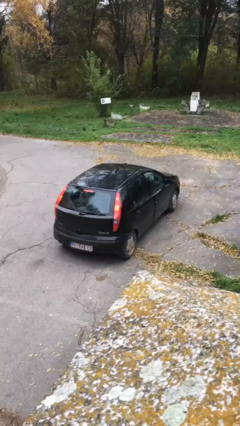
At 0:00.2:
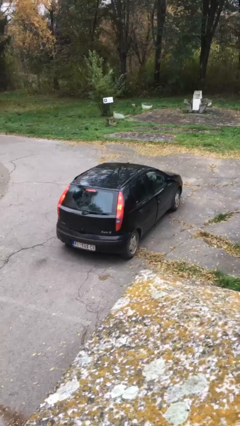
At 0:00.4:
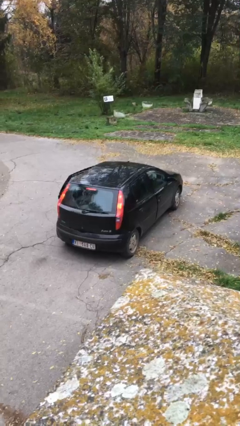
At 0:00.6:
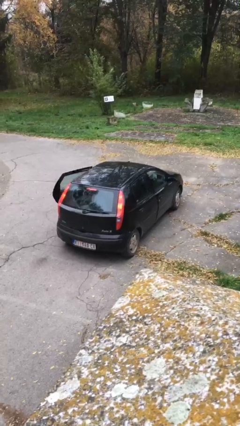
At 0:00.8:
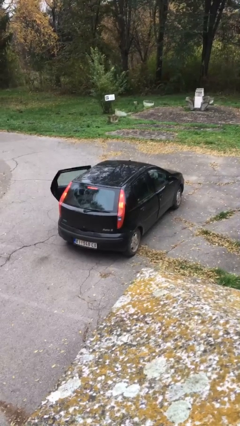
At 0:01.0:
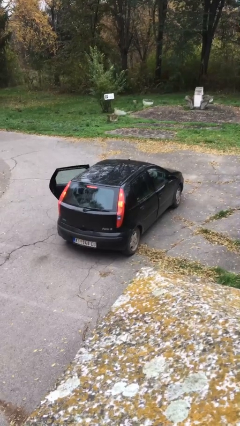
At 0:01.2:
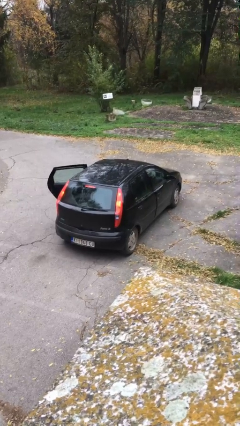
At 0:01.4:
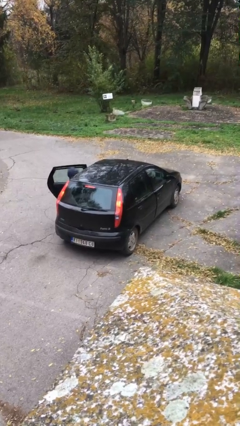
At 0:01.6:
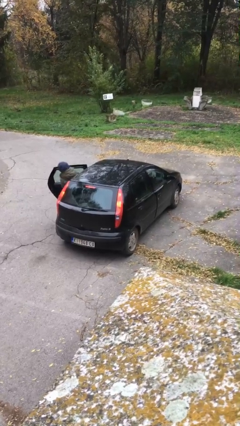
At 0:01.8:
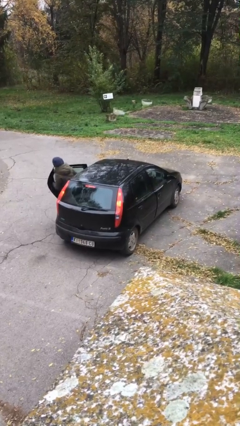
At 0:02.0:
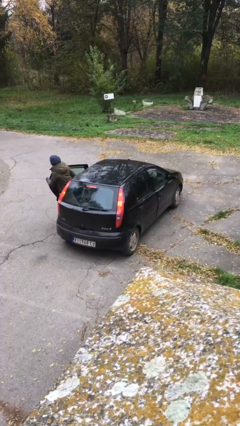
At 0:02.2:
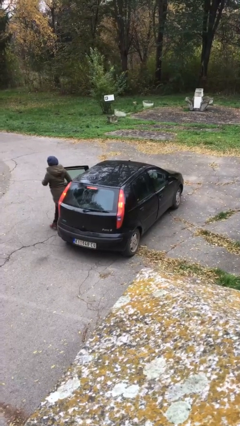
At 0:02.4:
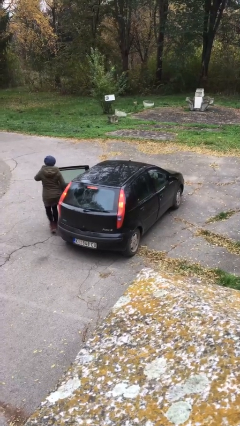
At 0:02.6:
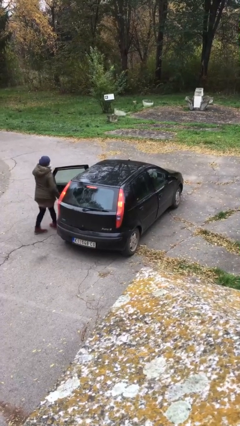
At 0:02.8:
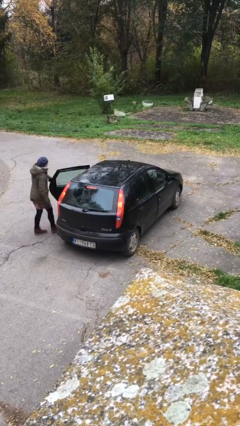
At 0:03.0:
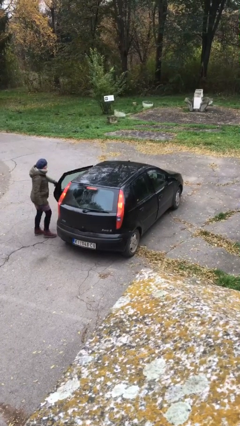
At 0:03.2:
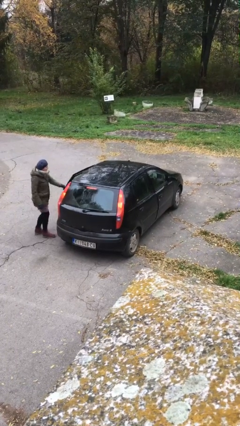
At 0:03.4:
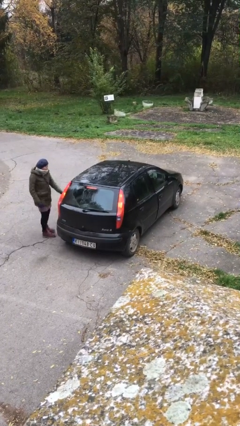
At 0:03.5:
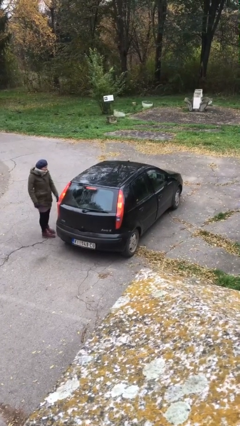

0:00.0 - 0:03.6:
car drops off person

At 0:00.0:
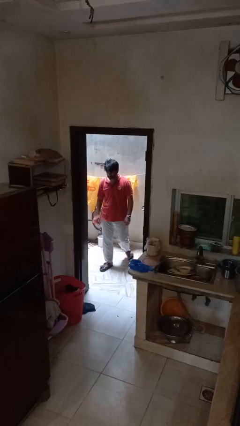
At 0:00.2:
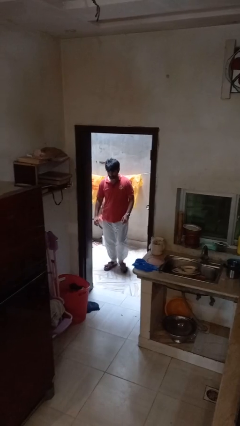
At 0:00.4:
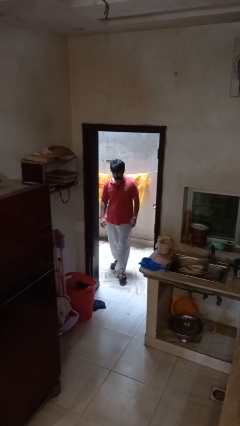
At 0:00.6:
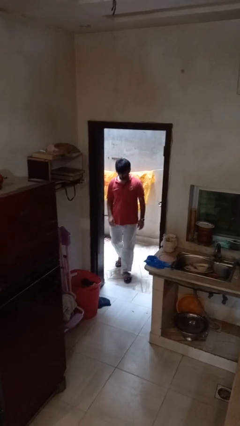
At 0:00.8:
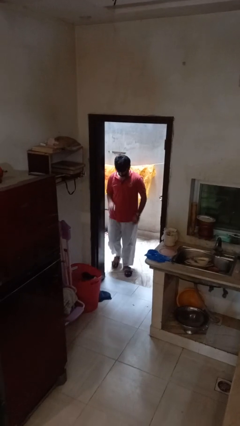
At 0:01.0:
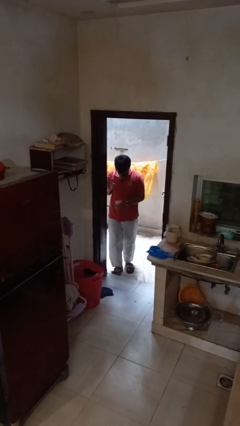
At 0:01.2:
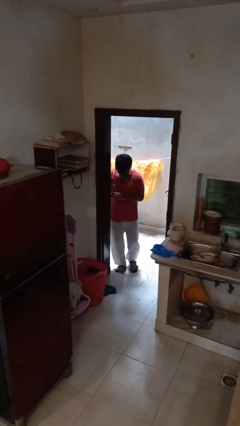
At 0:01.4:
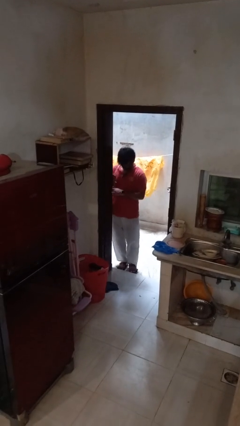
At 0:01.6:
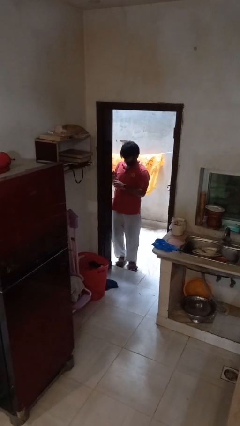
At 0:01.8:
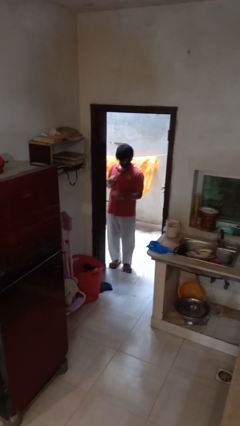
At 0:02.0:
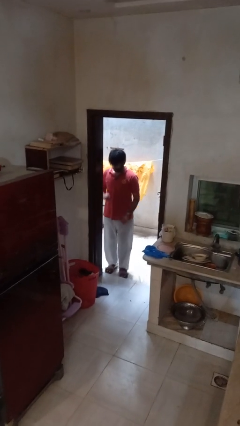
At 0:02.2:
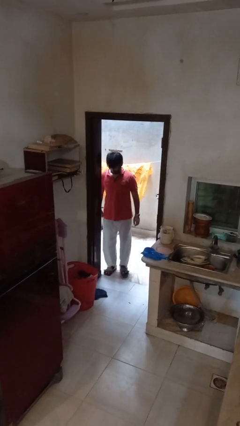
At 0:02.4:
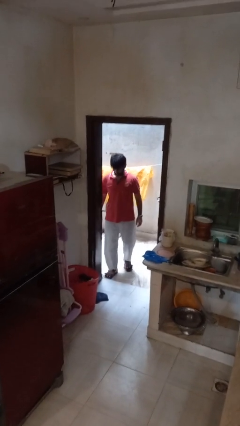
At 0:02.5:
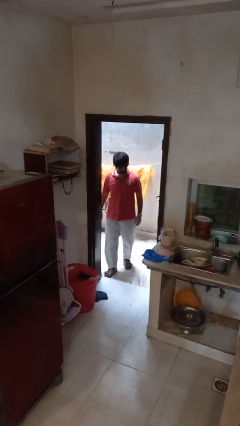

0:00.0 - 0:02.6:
person bumps into wall

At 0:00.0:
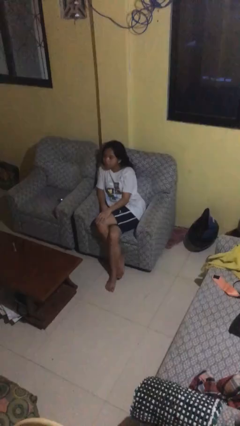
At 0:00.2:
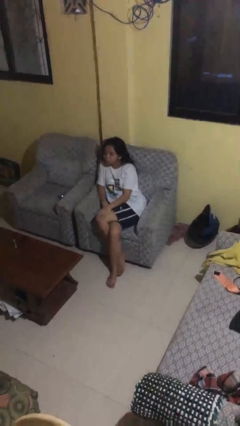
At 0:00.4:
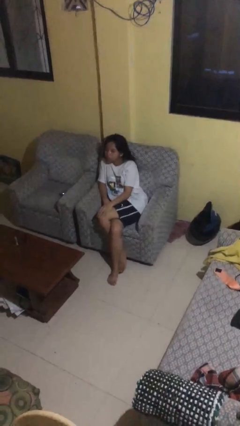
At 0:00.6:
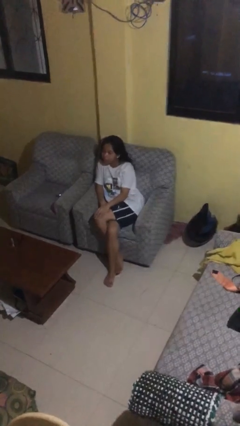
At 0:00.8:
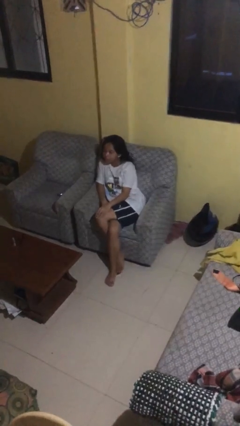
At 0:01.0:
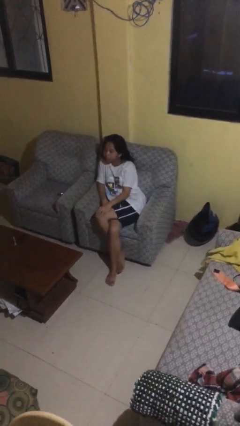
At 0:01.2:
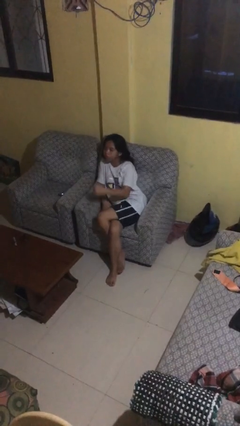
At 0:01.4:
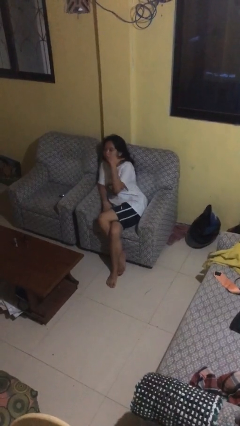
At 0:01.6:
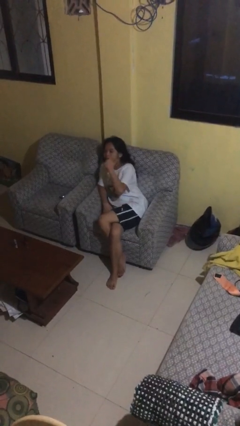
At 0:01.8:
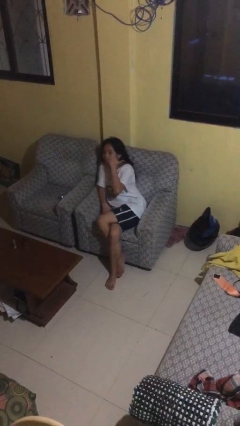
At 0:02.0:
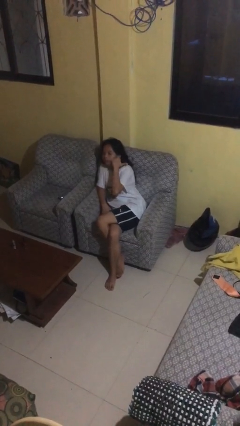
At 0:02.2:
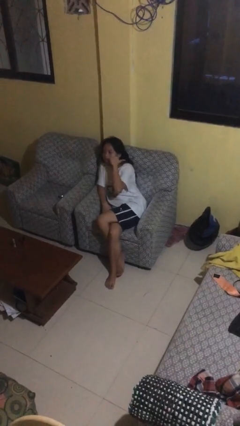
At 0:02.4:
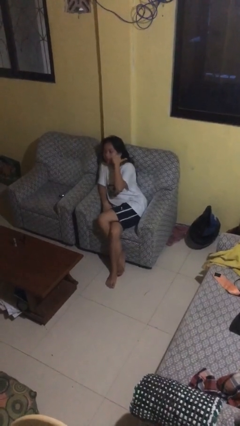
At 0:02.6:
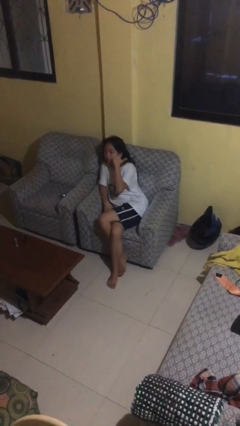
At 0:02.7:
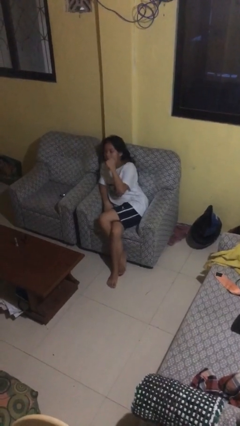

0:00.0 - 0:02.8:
person gestures behind me

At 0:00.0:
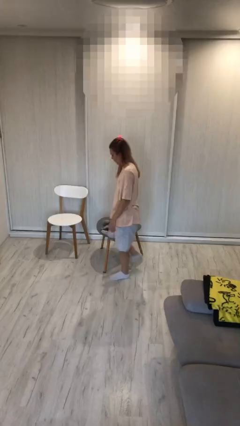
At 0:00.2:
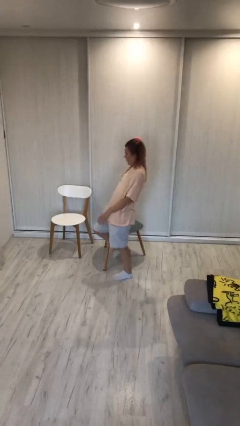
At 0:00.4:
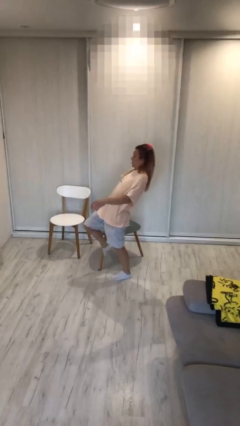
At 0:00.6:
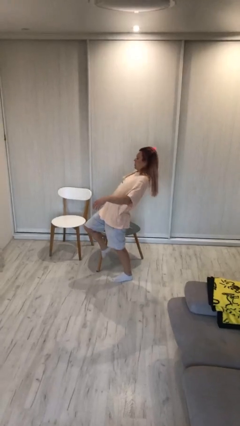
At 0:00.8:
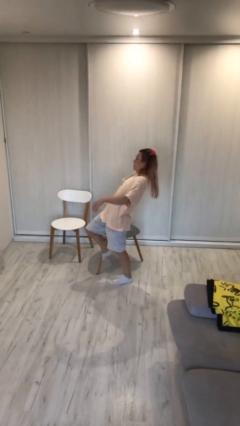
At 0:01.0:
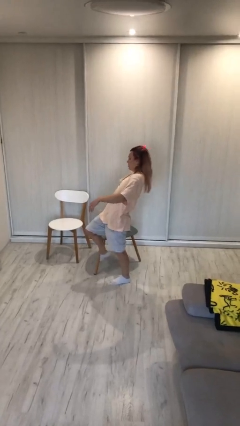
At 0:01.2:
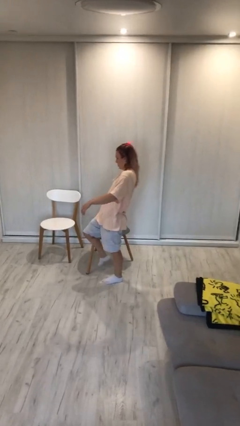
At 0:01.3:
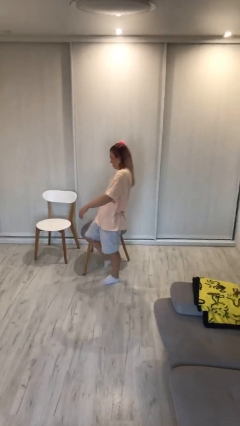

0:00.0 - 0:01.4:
person bumps into table

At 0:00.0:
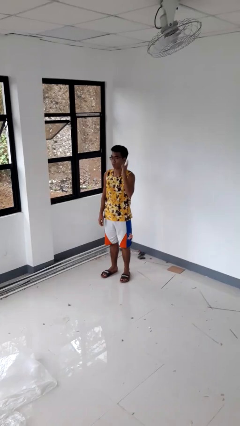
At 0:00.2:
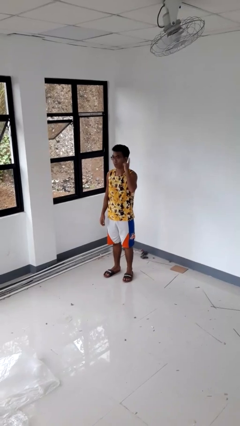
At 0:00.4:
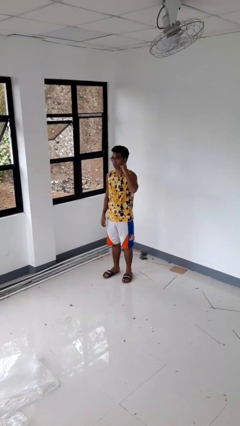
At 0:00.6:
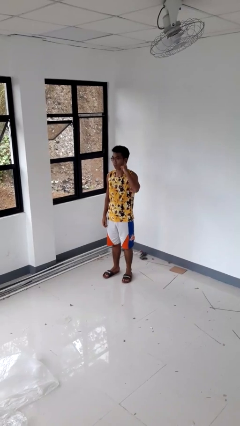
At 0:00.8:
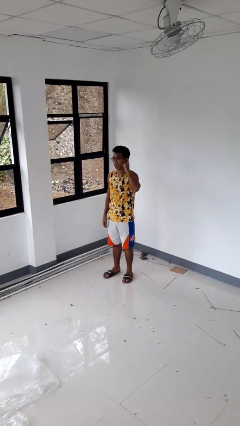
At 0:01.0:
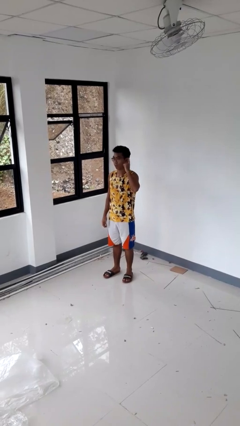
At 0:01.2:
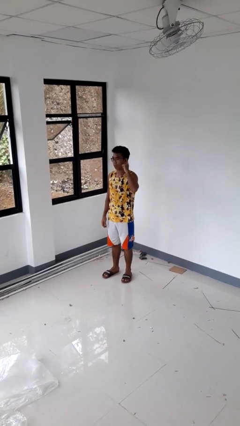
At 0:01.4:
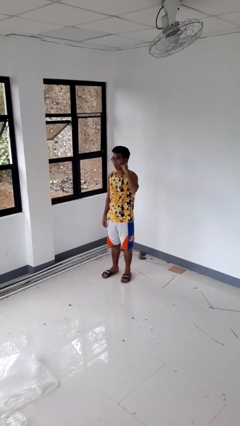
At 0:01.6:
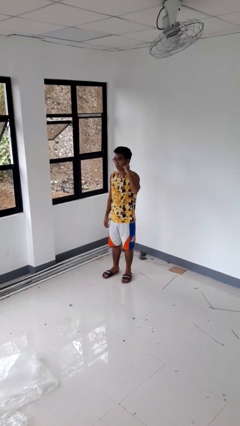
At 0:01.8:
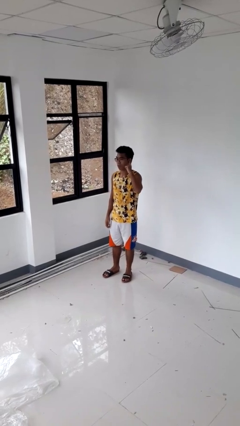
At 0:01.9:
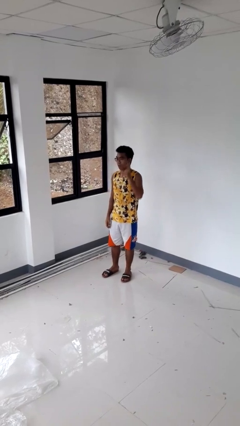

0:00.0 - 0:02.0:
person gestures listen closely

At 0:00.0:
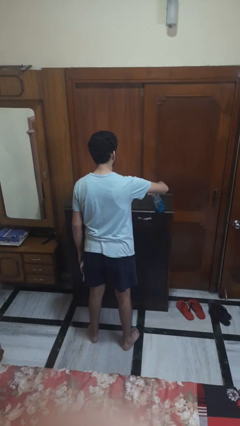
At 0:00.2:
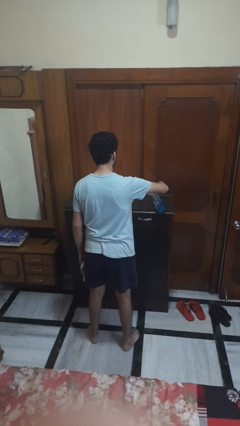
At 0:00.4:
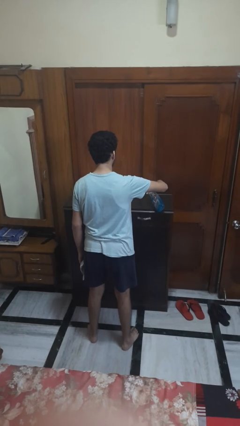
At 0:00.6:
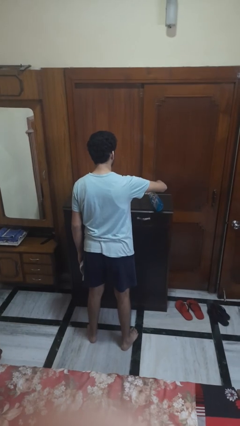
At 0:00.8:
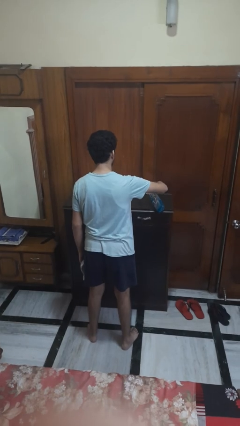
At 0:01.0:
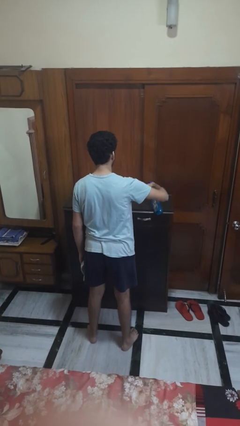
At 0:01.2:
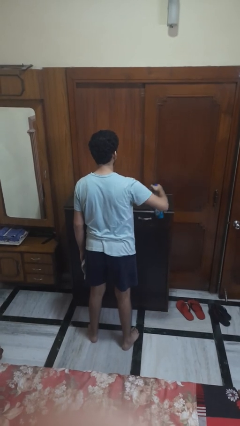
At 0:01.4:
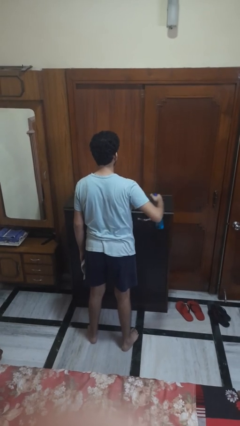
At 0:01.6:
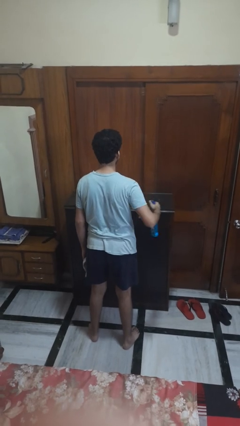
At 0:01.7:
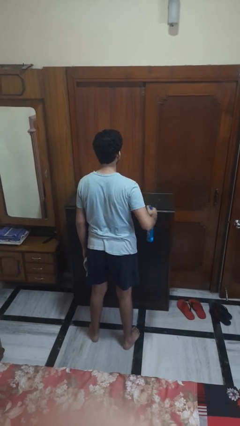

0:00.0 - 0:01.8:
person sprays from bottle

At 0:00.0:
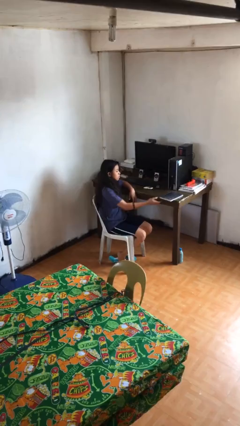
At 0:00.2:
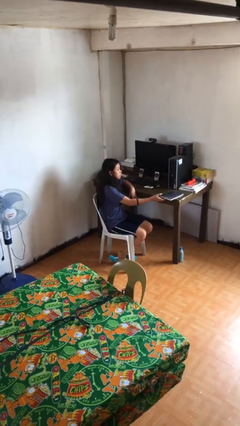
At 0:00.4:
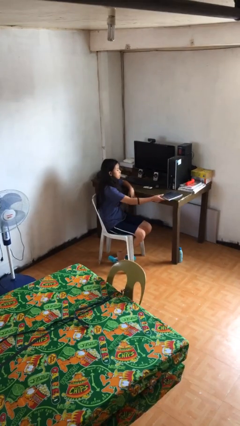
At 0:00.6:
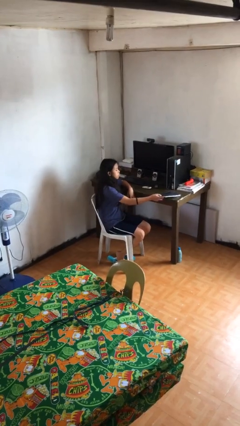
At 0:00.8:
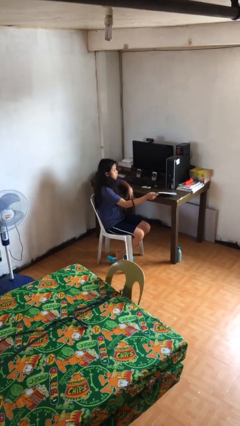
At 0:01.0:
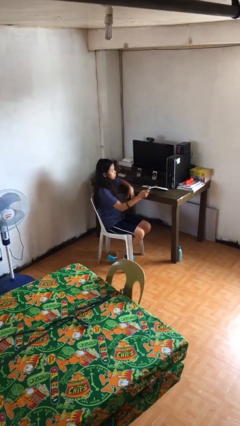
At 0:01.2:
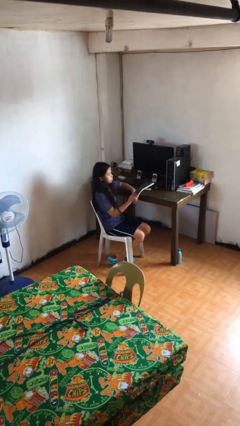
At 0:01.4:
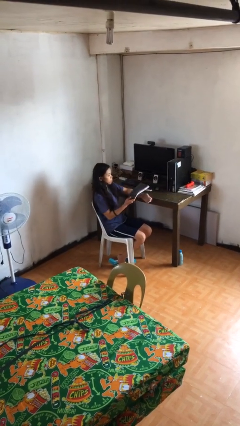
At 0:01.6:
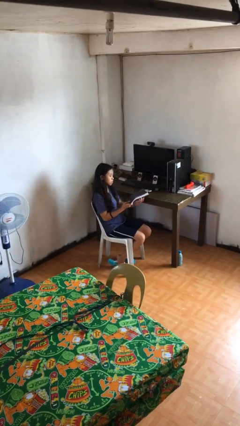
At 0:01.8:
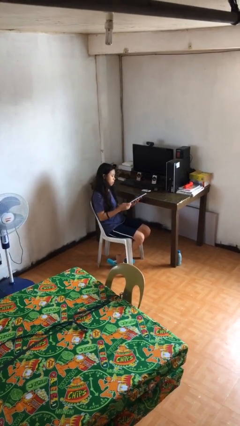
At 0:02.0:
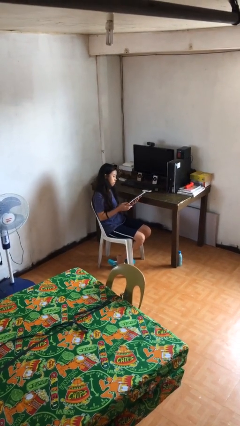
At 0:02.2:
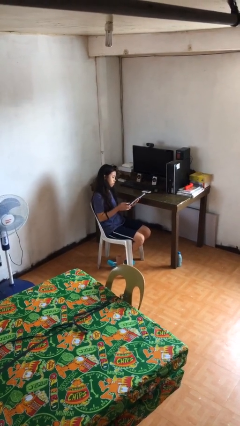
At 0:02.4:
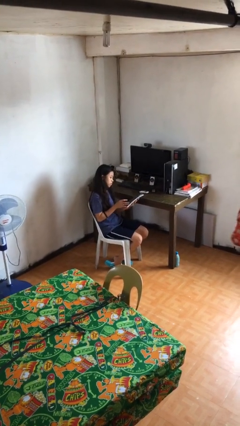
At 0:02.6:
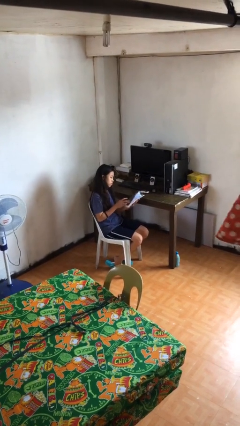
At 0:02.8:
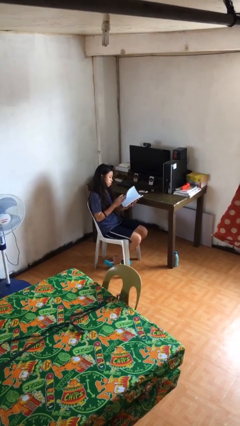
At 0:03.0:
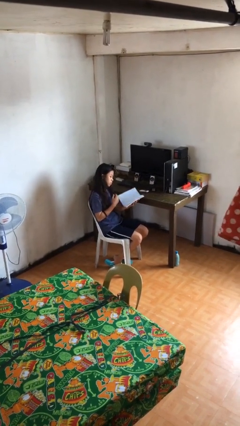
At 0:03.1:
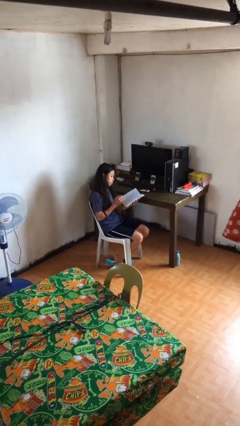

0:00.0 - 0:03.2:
person picks up object from table
